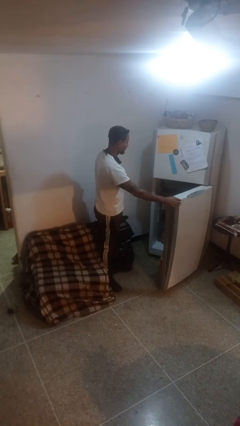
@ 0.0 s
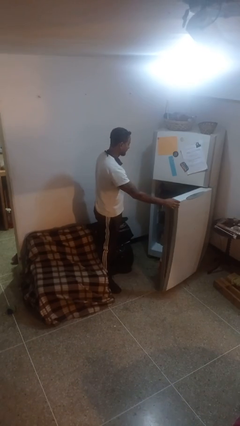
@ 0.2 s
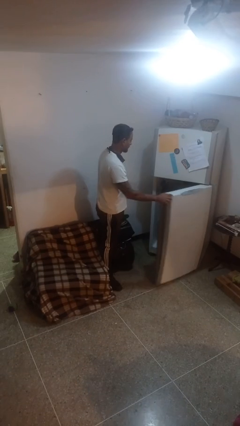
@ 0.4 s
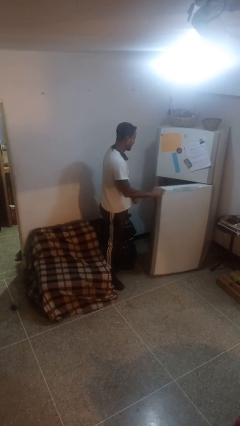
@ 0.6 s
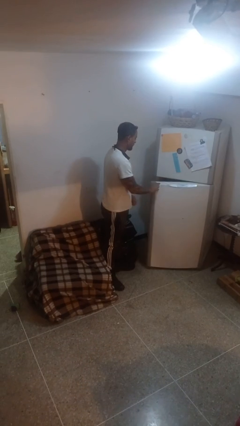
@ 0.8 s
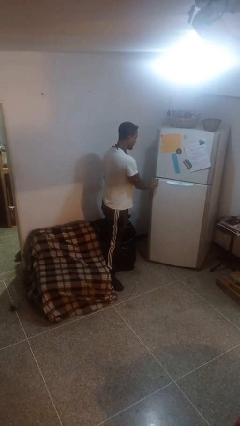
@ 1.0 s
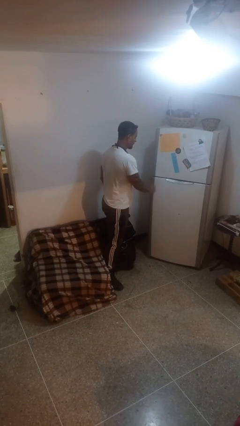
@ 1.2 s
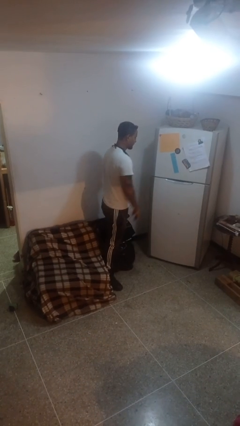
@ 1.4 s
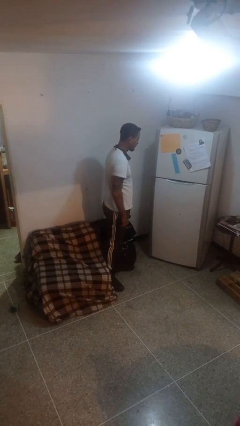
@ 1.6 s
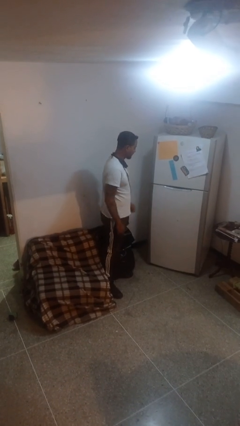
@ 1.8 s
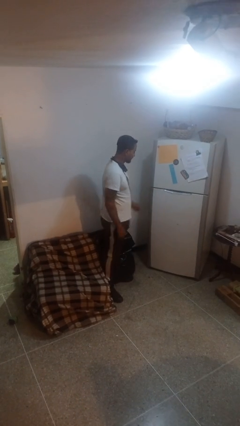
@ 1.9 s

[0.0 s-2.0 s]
person closes refrigerator

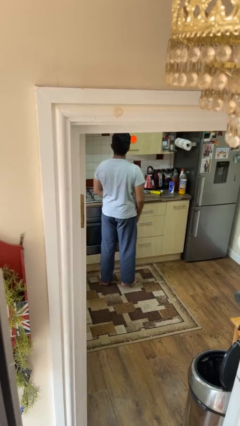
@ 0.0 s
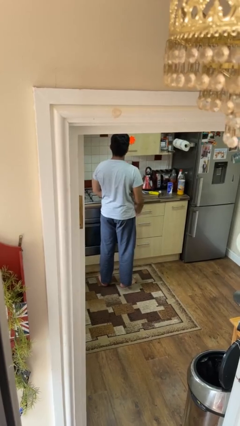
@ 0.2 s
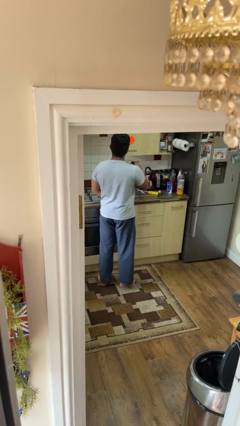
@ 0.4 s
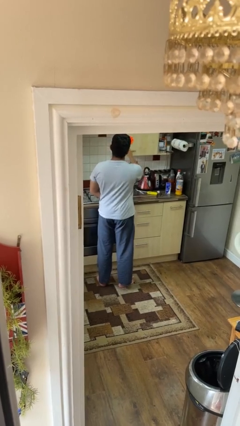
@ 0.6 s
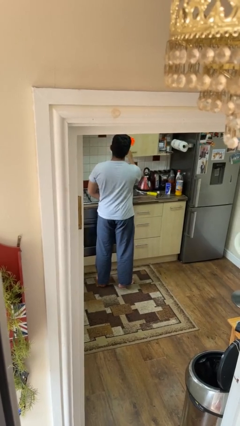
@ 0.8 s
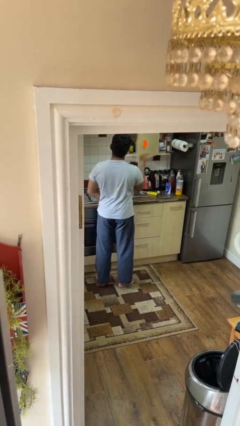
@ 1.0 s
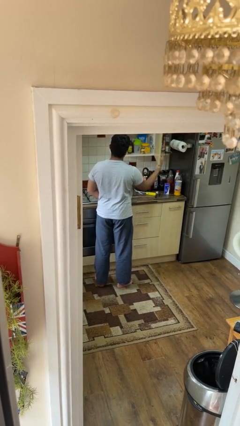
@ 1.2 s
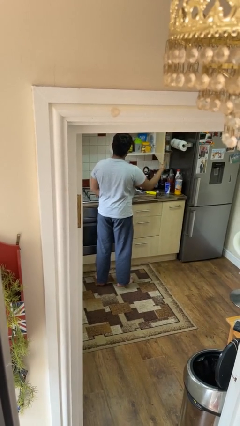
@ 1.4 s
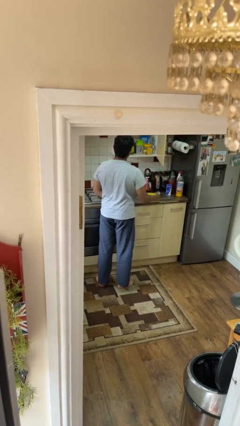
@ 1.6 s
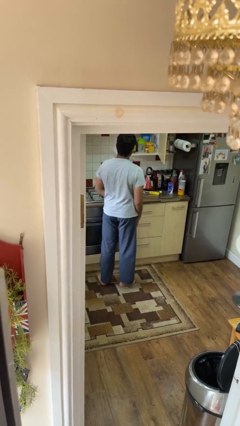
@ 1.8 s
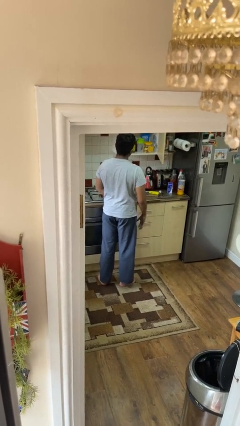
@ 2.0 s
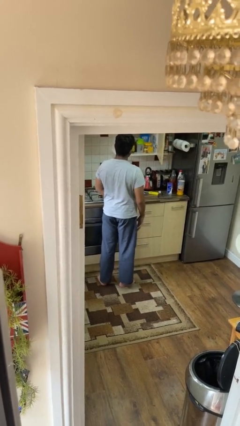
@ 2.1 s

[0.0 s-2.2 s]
person opens cabinet

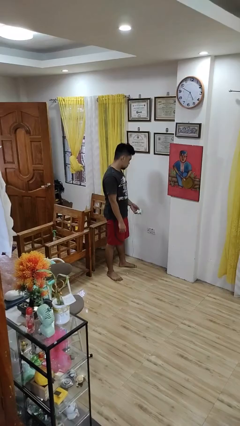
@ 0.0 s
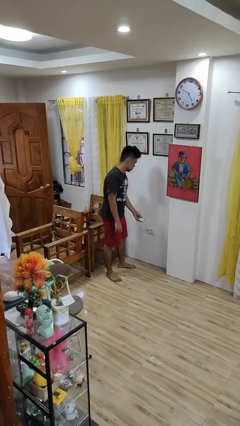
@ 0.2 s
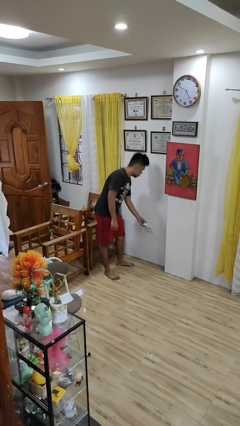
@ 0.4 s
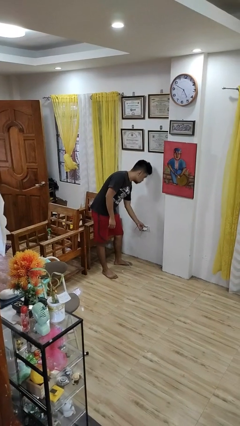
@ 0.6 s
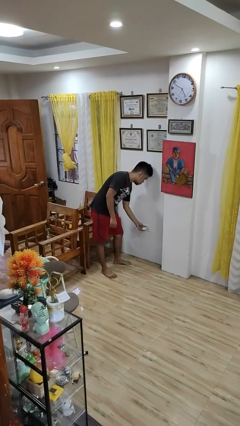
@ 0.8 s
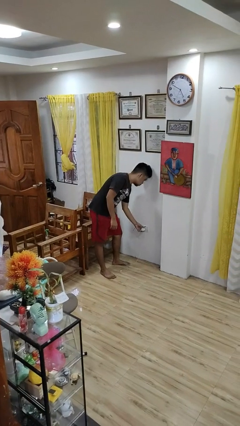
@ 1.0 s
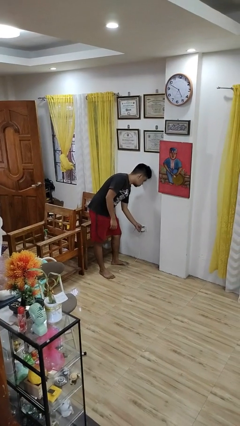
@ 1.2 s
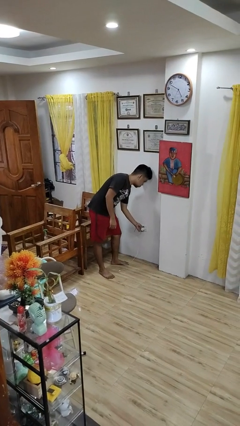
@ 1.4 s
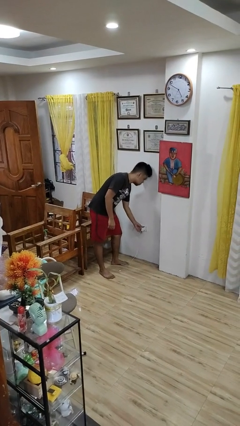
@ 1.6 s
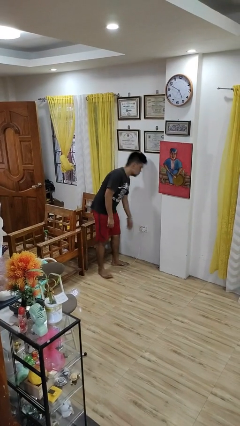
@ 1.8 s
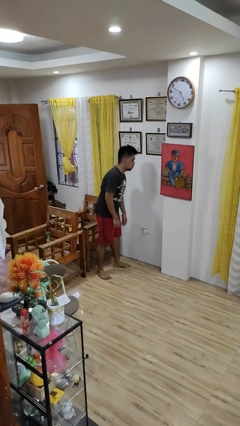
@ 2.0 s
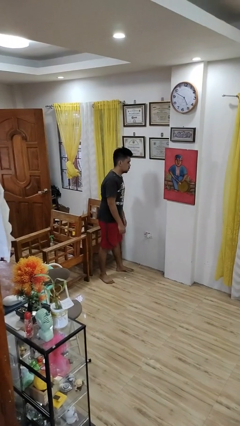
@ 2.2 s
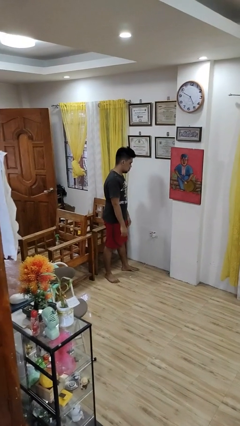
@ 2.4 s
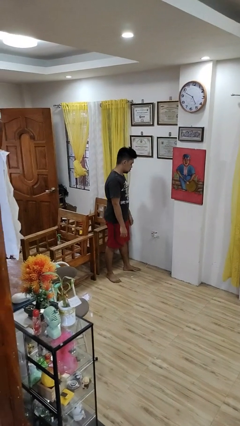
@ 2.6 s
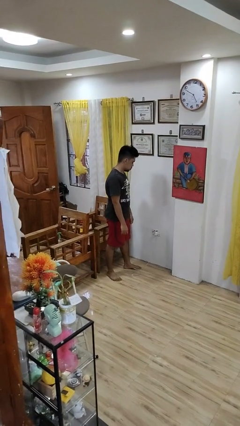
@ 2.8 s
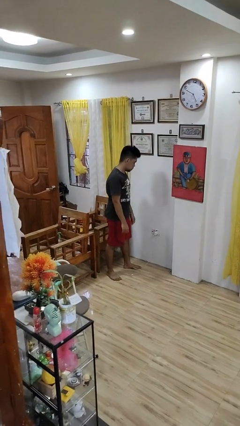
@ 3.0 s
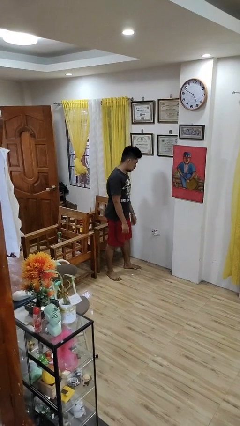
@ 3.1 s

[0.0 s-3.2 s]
person plugs into electrical socket

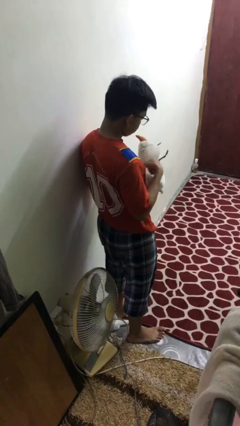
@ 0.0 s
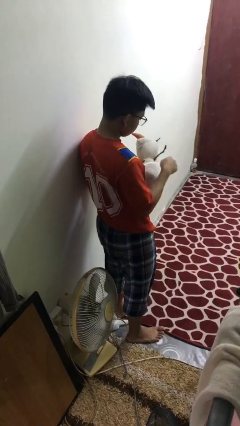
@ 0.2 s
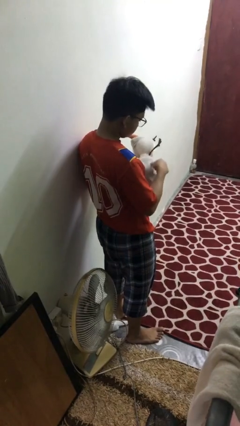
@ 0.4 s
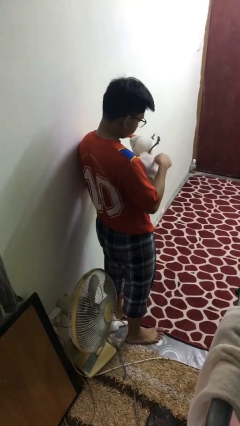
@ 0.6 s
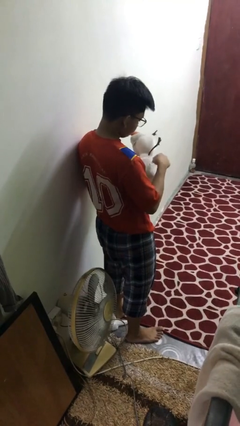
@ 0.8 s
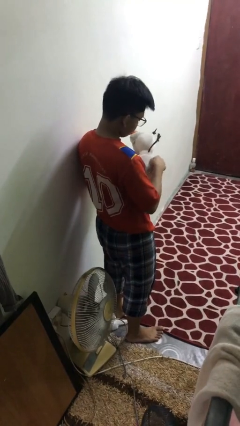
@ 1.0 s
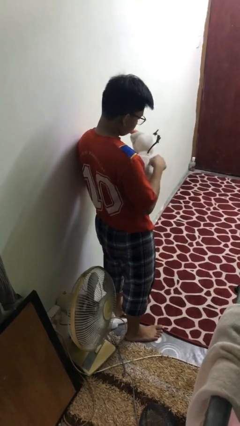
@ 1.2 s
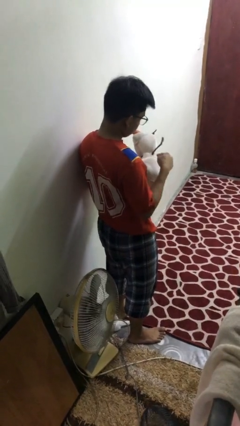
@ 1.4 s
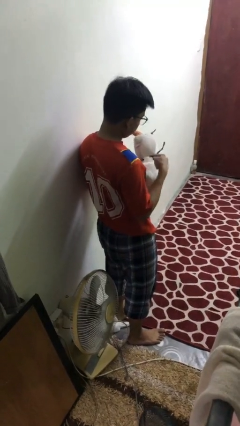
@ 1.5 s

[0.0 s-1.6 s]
person taps object with finger

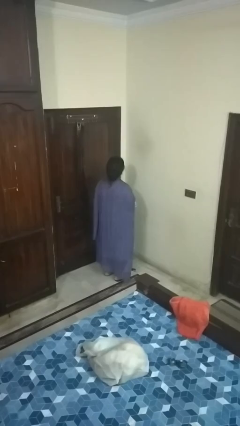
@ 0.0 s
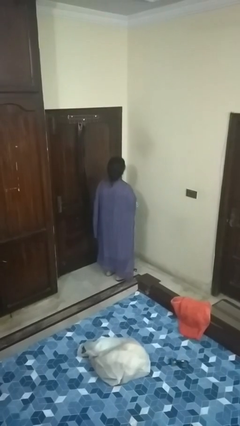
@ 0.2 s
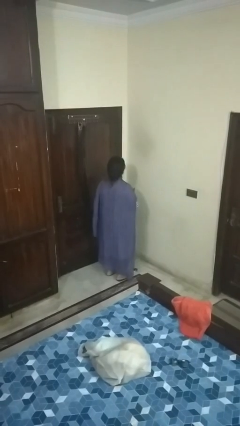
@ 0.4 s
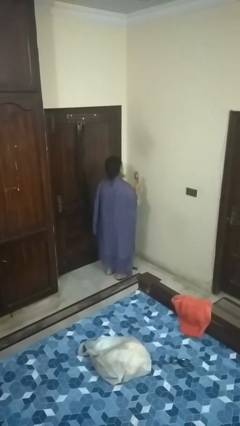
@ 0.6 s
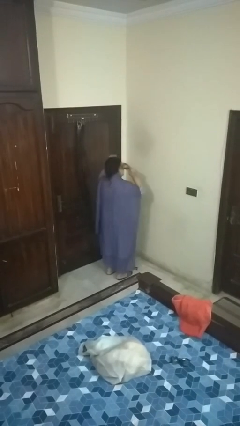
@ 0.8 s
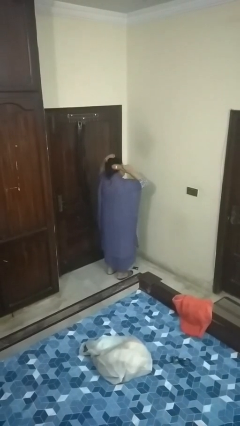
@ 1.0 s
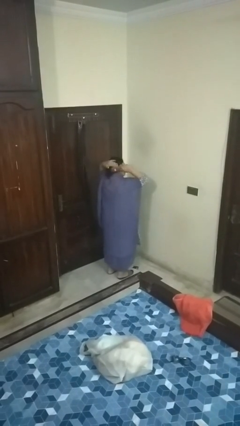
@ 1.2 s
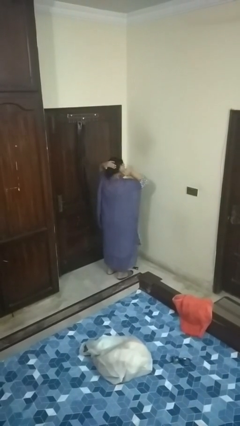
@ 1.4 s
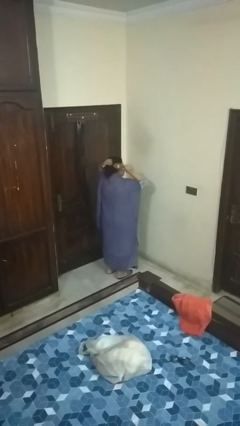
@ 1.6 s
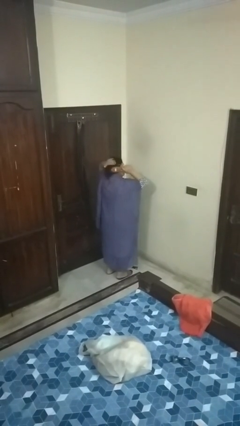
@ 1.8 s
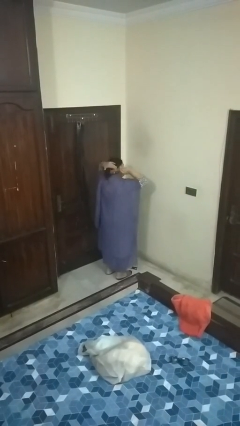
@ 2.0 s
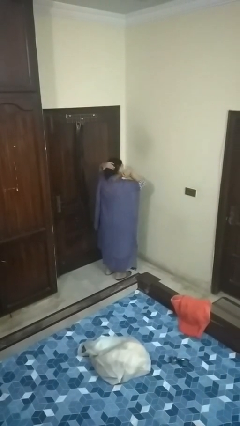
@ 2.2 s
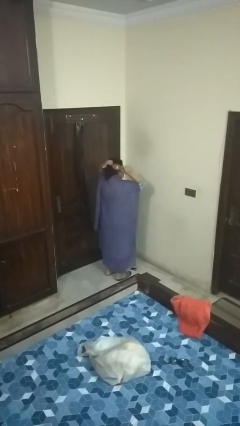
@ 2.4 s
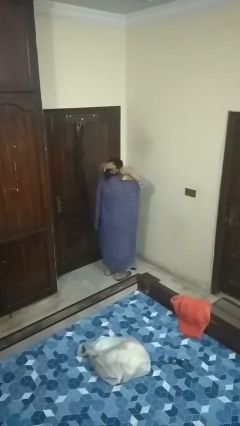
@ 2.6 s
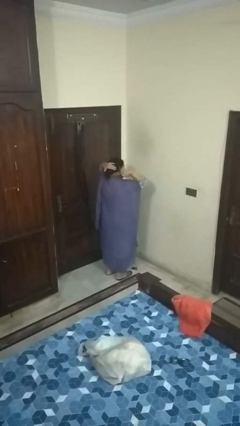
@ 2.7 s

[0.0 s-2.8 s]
person brushes hair

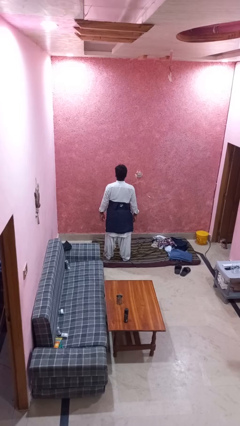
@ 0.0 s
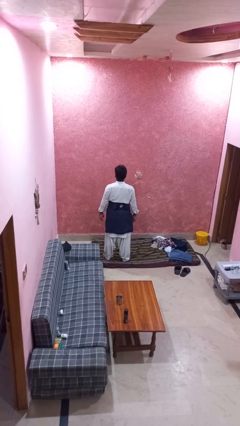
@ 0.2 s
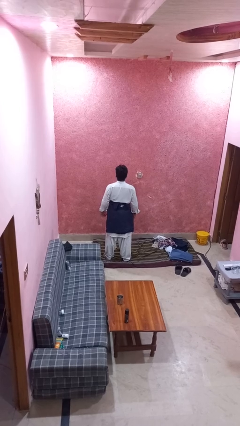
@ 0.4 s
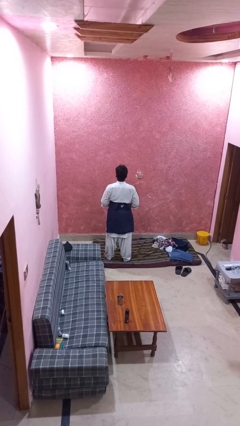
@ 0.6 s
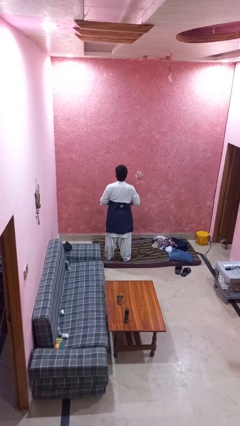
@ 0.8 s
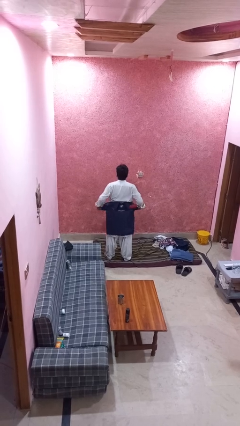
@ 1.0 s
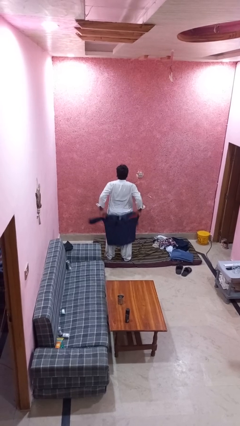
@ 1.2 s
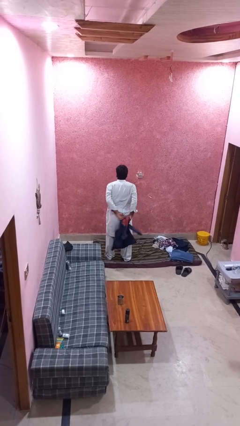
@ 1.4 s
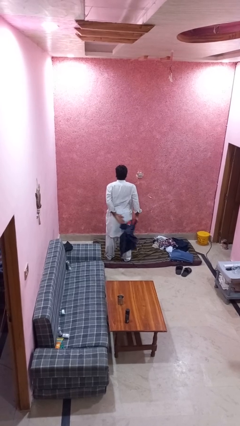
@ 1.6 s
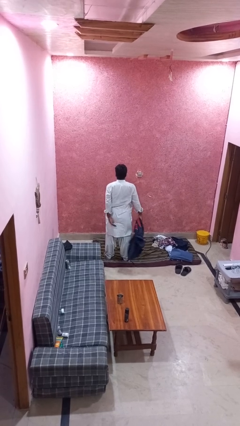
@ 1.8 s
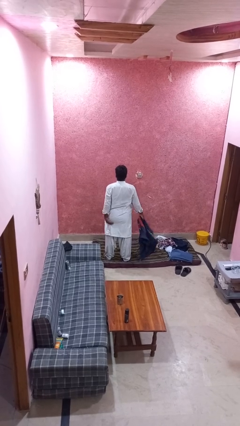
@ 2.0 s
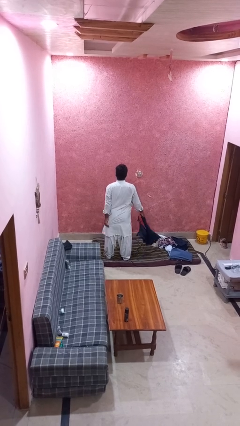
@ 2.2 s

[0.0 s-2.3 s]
person unties jacket around waist

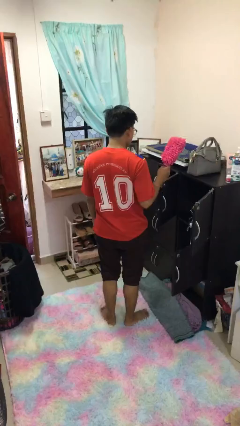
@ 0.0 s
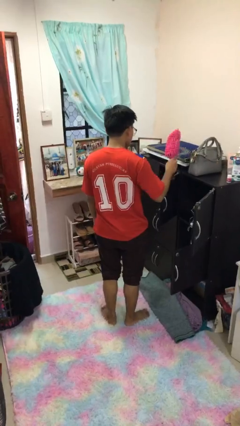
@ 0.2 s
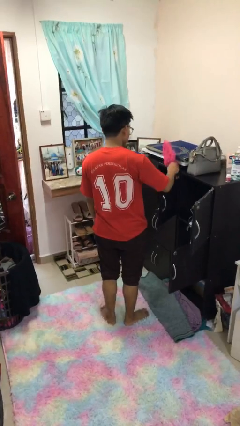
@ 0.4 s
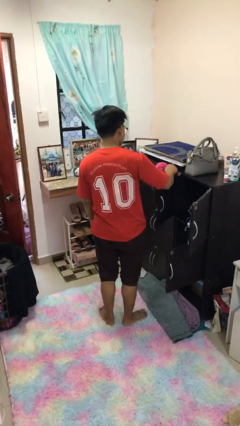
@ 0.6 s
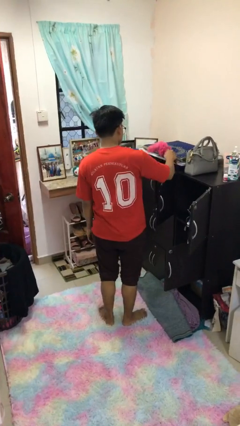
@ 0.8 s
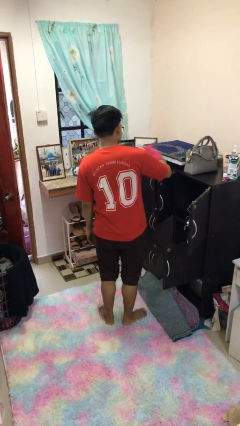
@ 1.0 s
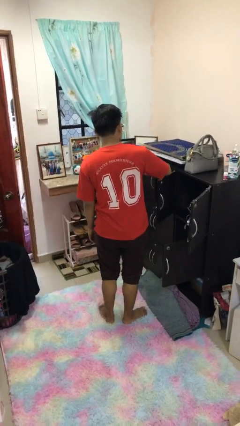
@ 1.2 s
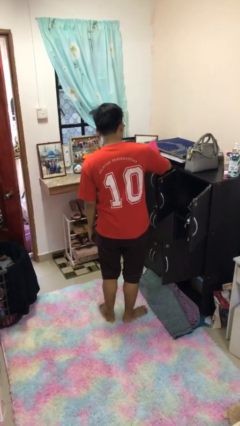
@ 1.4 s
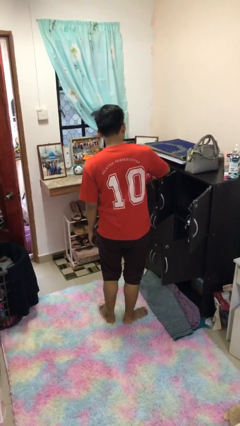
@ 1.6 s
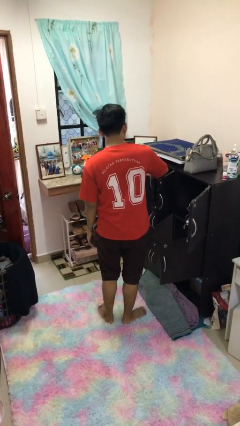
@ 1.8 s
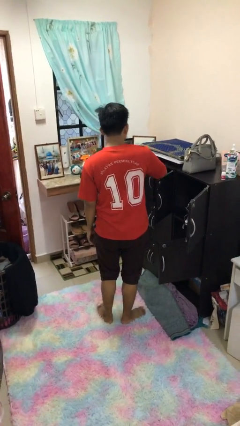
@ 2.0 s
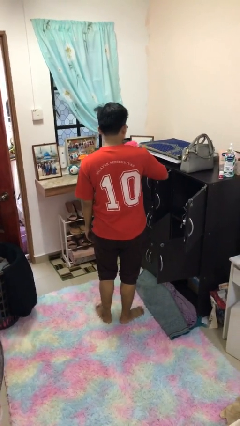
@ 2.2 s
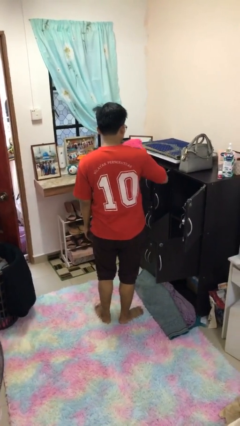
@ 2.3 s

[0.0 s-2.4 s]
person dusts furniture

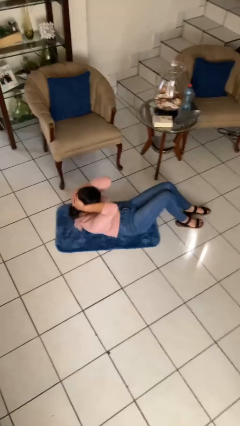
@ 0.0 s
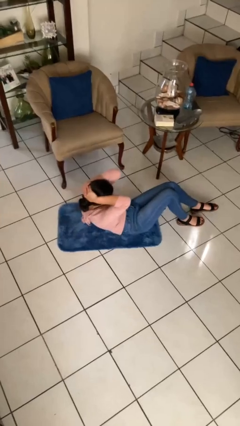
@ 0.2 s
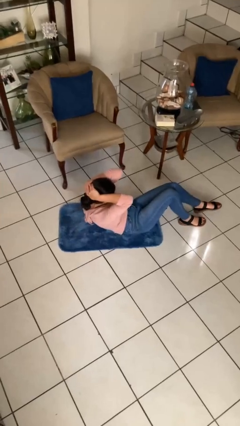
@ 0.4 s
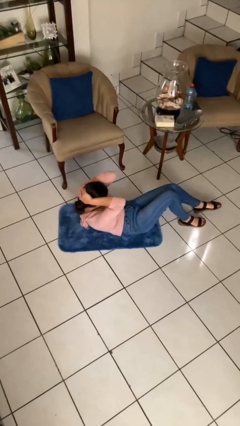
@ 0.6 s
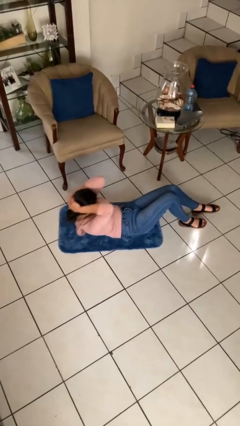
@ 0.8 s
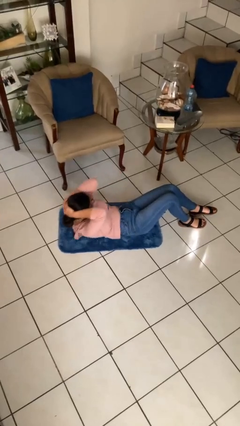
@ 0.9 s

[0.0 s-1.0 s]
person exercises with situp
